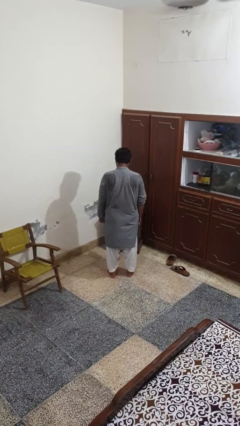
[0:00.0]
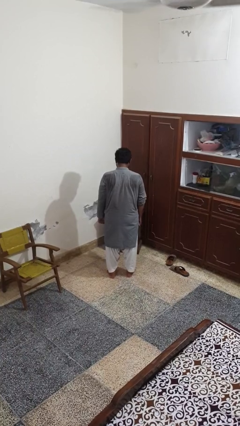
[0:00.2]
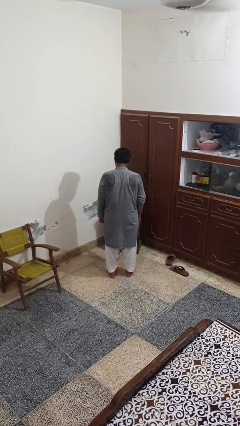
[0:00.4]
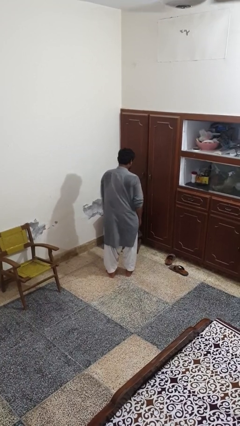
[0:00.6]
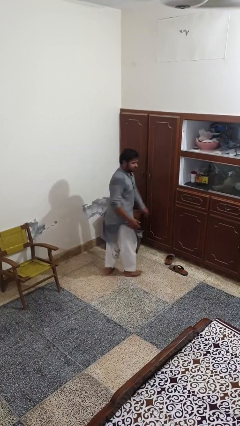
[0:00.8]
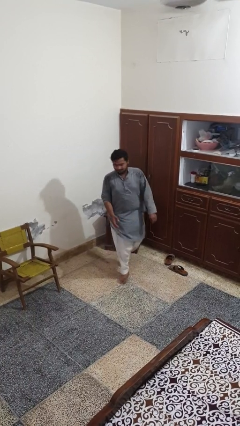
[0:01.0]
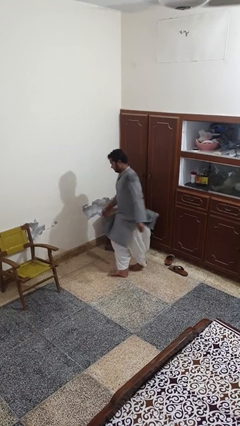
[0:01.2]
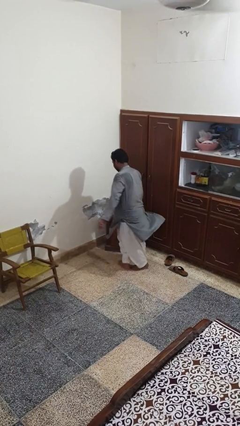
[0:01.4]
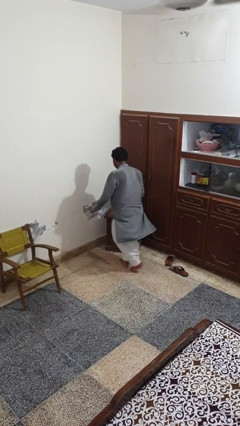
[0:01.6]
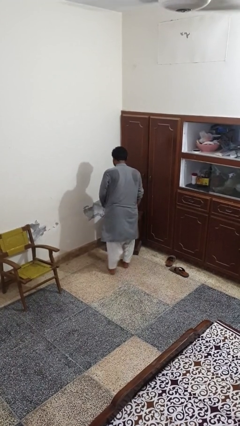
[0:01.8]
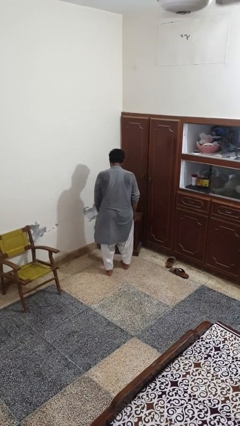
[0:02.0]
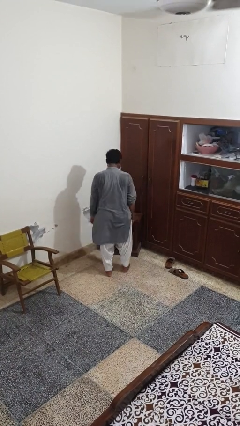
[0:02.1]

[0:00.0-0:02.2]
person twirls

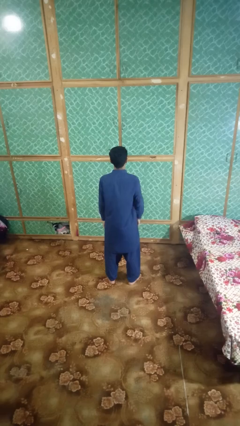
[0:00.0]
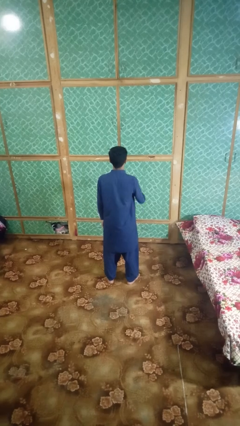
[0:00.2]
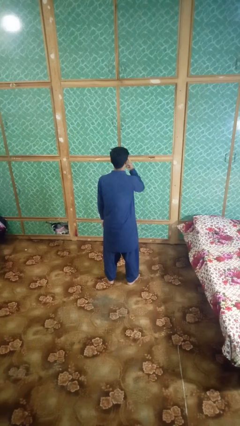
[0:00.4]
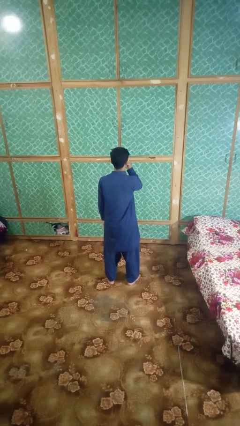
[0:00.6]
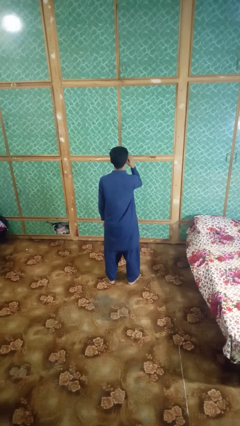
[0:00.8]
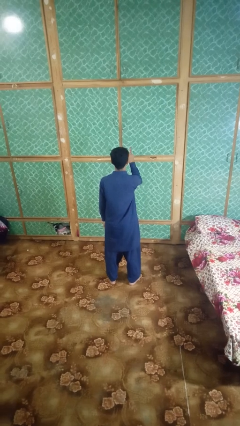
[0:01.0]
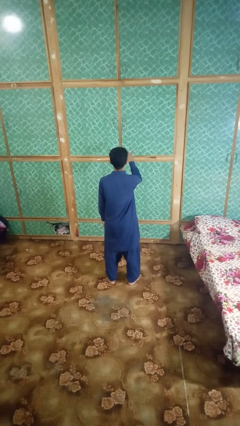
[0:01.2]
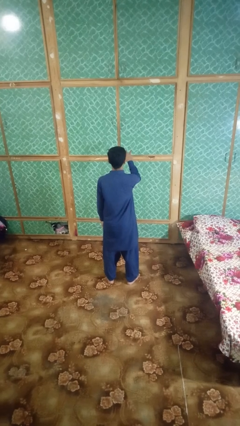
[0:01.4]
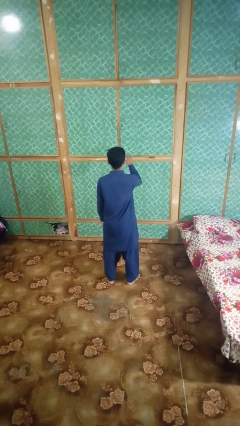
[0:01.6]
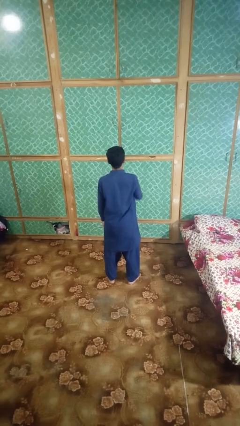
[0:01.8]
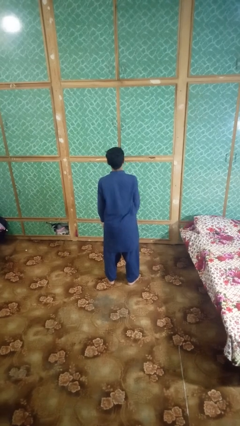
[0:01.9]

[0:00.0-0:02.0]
person gestures watch closely

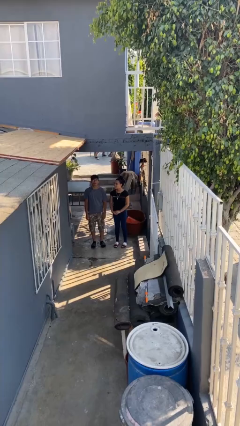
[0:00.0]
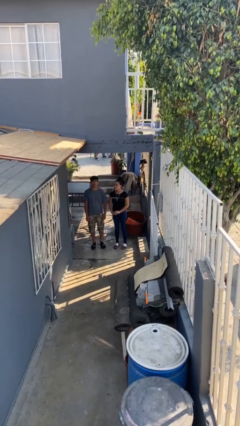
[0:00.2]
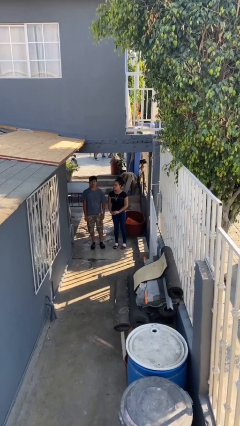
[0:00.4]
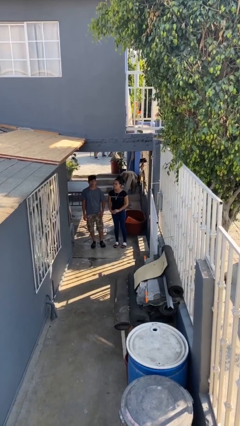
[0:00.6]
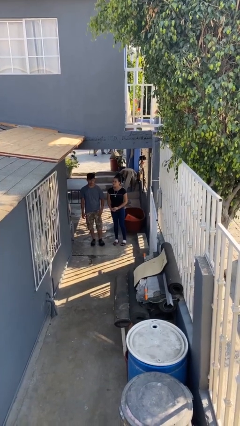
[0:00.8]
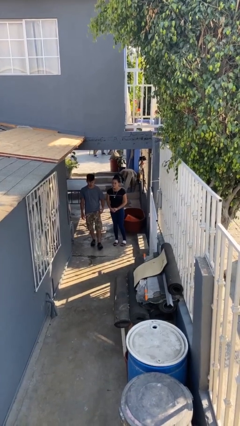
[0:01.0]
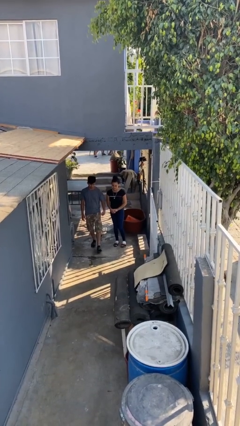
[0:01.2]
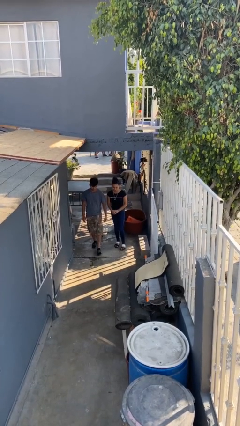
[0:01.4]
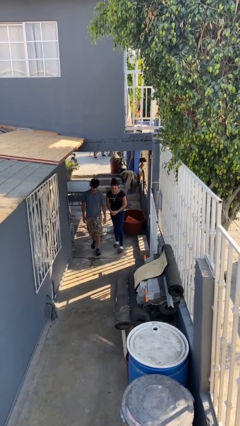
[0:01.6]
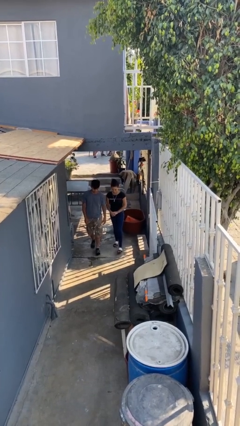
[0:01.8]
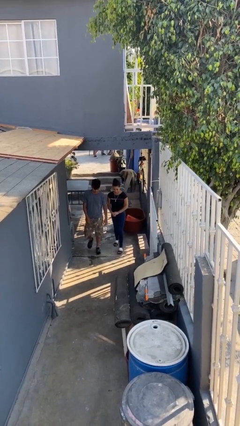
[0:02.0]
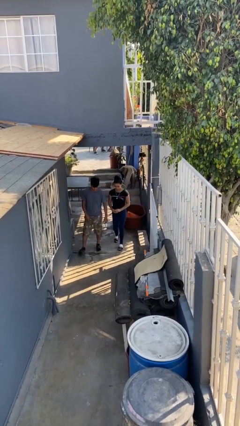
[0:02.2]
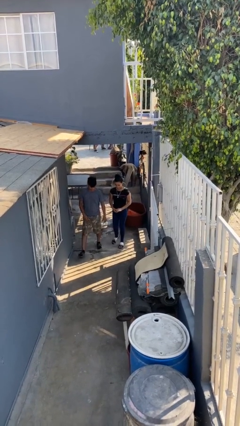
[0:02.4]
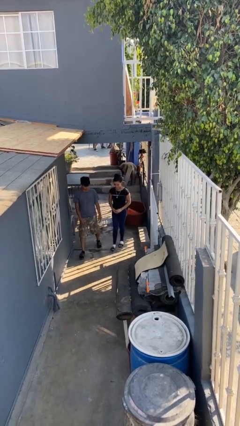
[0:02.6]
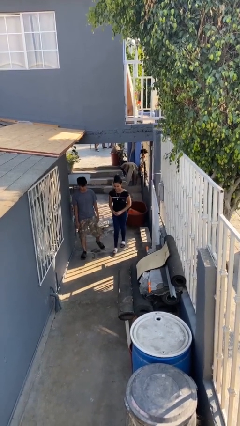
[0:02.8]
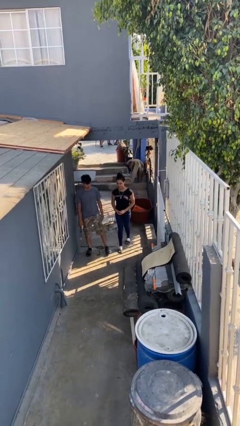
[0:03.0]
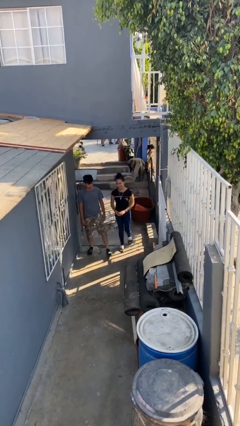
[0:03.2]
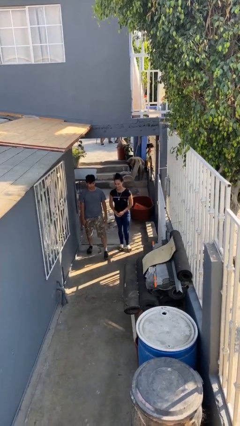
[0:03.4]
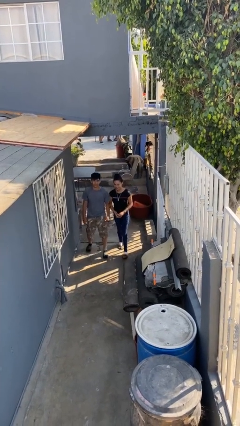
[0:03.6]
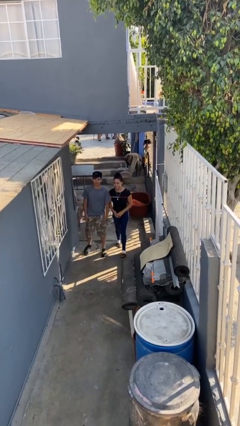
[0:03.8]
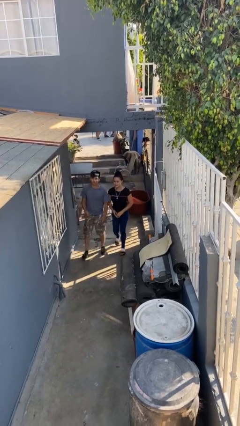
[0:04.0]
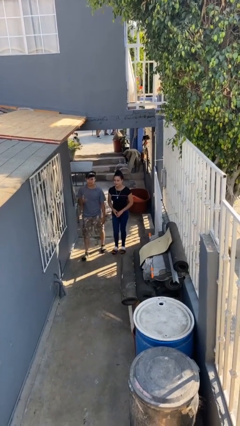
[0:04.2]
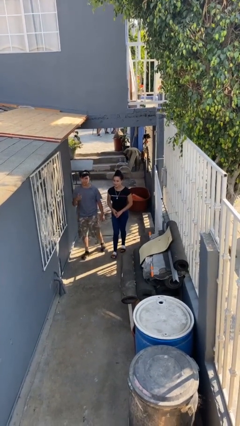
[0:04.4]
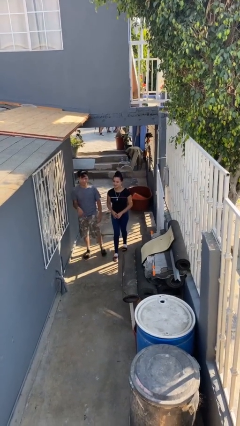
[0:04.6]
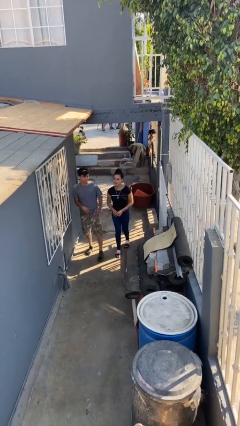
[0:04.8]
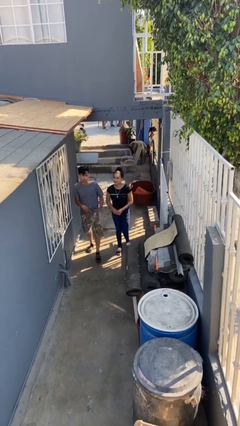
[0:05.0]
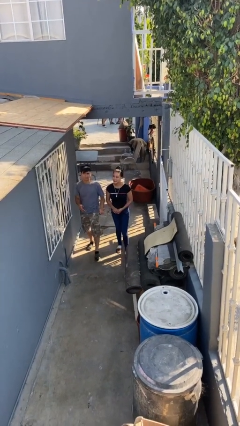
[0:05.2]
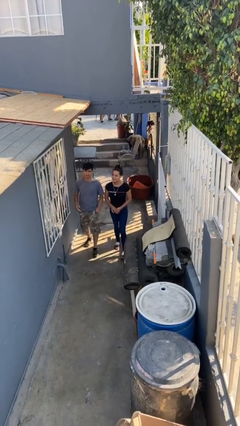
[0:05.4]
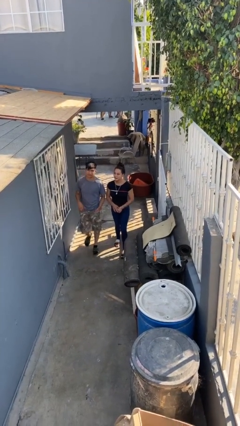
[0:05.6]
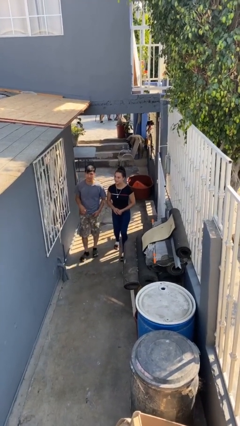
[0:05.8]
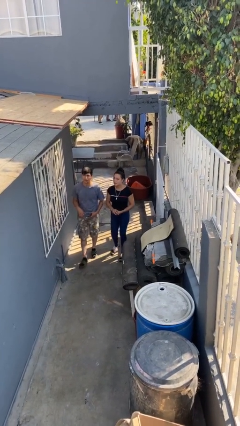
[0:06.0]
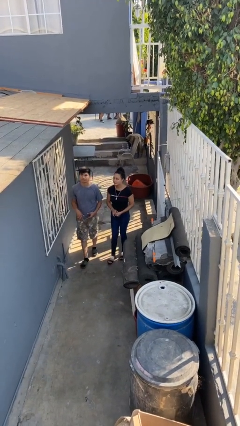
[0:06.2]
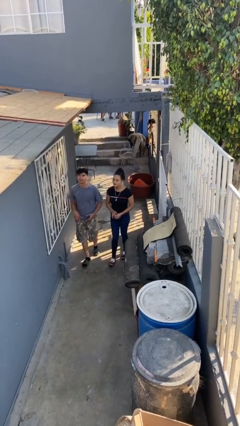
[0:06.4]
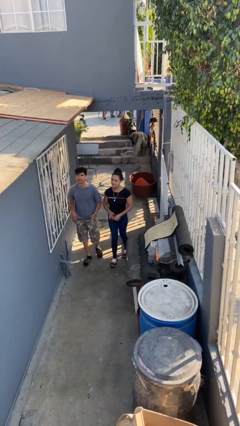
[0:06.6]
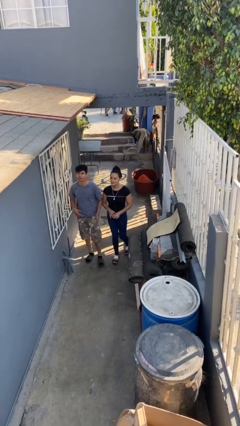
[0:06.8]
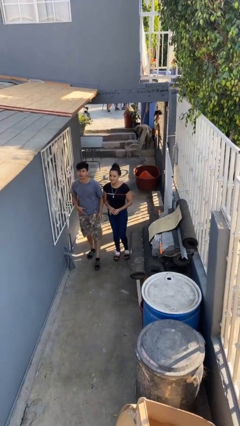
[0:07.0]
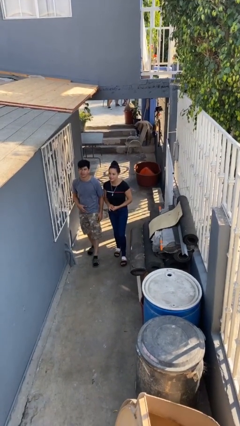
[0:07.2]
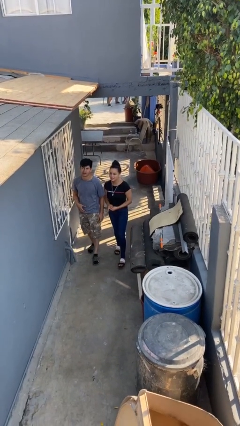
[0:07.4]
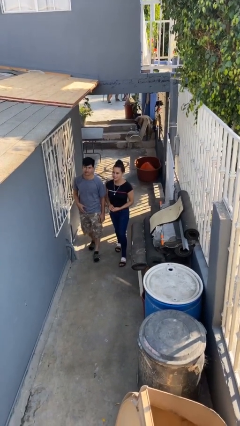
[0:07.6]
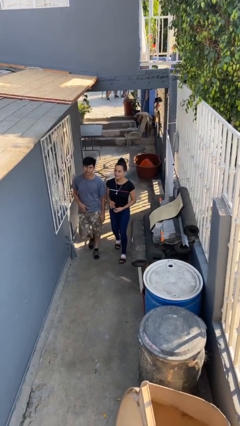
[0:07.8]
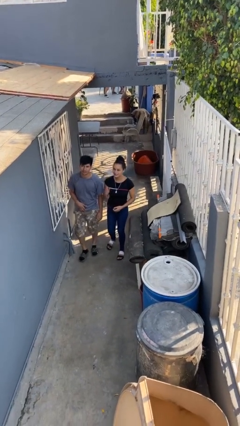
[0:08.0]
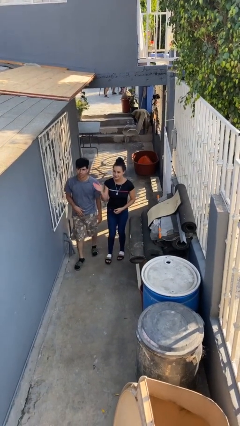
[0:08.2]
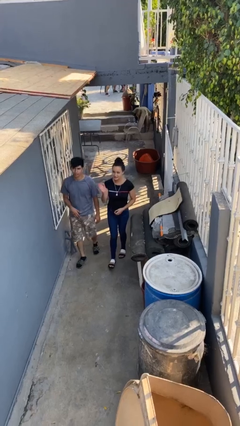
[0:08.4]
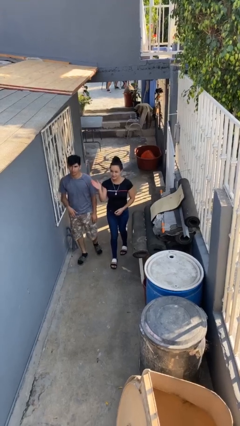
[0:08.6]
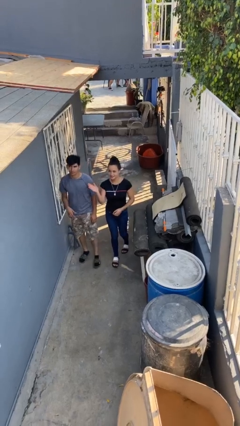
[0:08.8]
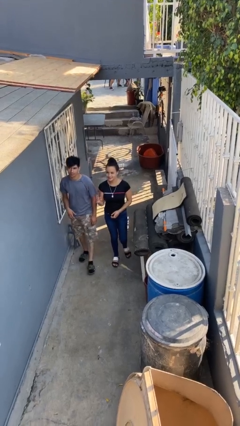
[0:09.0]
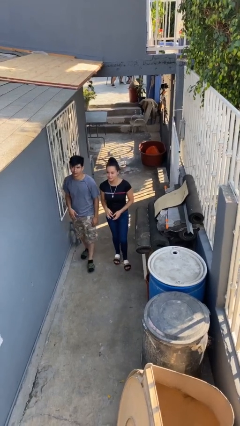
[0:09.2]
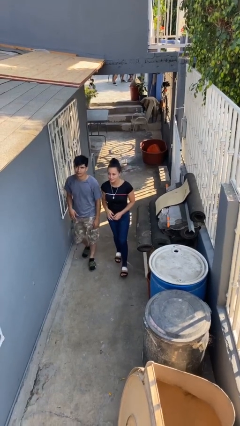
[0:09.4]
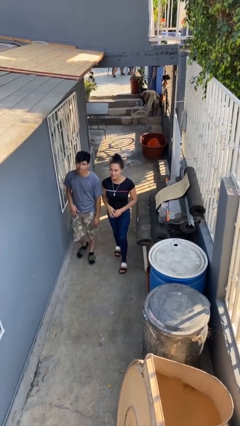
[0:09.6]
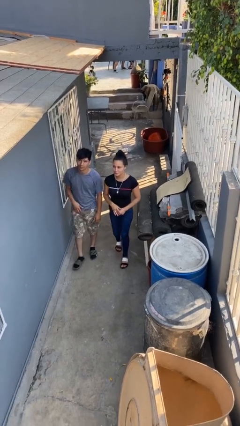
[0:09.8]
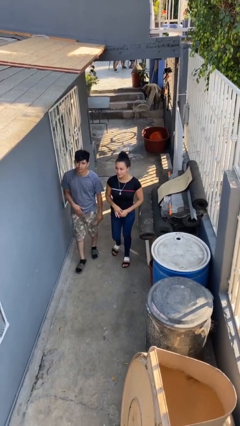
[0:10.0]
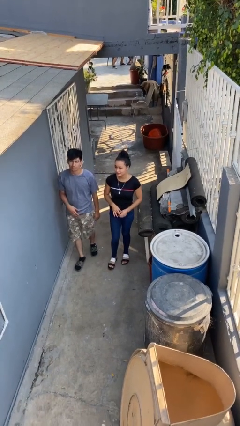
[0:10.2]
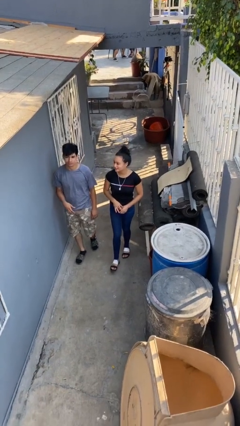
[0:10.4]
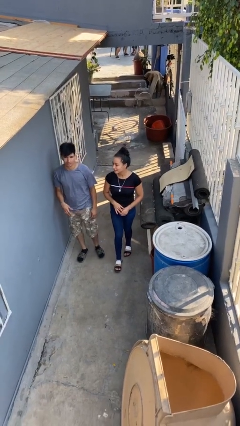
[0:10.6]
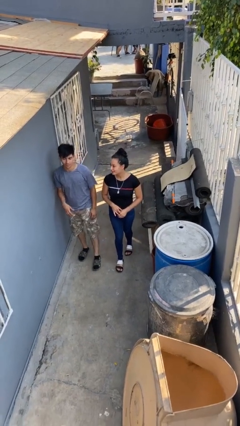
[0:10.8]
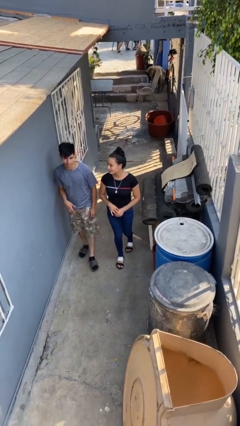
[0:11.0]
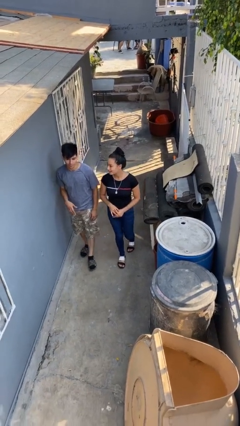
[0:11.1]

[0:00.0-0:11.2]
person talks to person

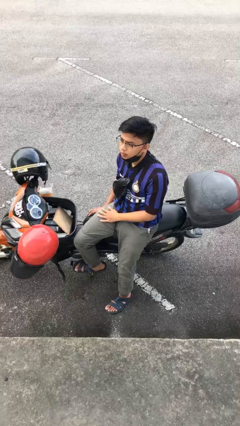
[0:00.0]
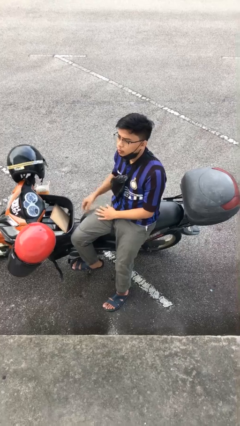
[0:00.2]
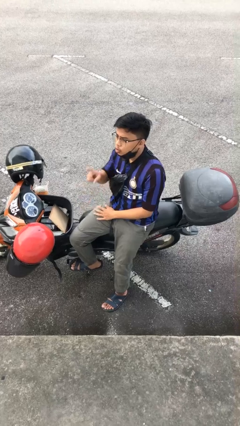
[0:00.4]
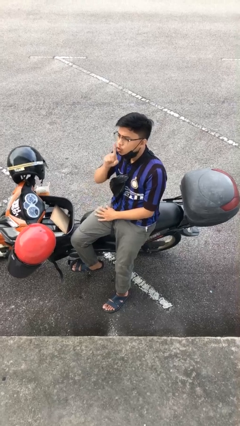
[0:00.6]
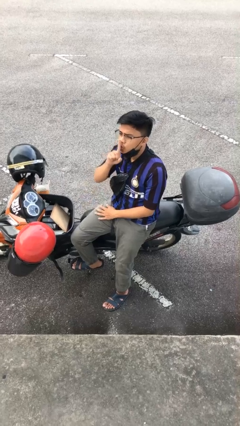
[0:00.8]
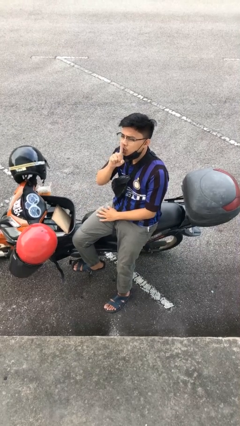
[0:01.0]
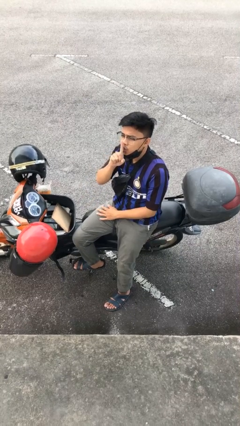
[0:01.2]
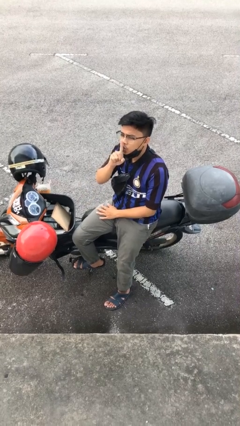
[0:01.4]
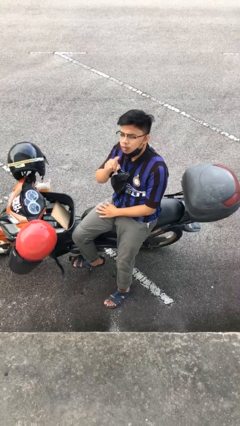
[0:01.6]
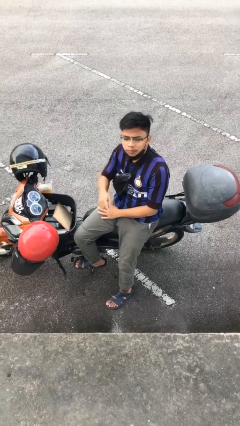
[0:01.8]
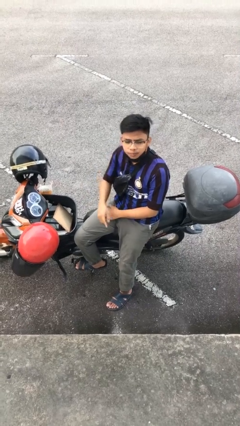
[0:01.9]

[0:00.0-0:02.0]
person gestures be quiet
